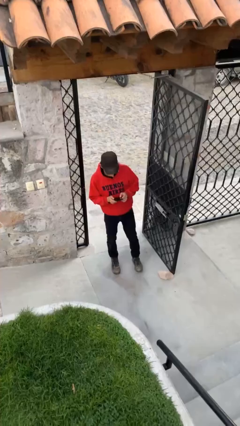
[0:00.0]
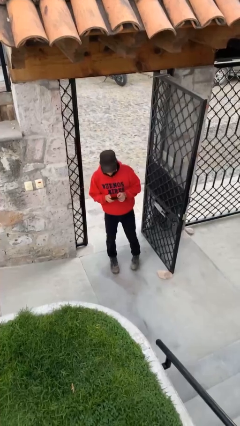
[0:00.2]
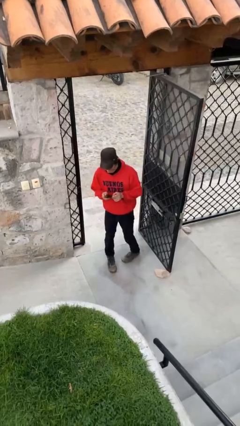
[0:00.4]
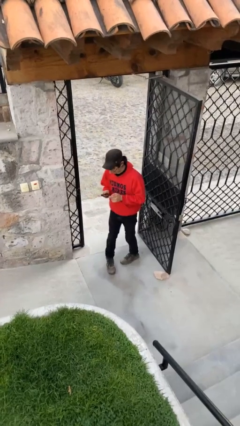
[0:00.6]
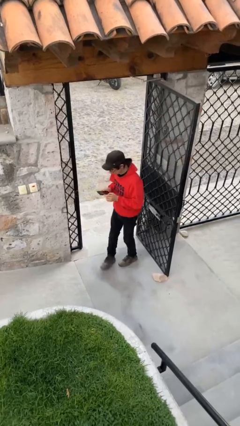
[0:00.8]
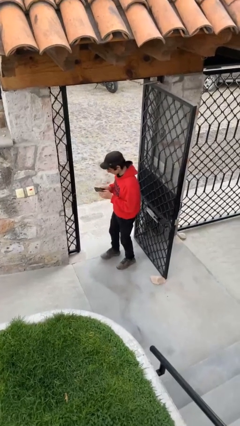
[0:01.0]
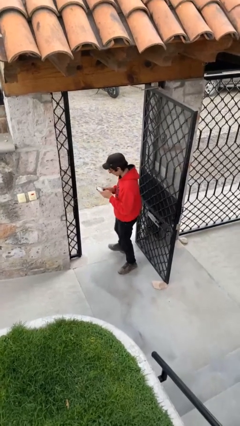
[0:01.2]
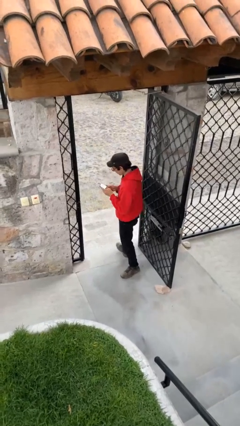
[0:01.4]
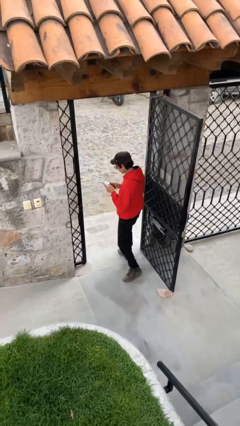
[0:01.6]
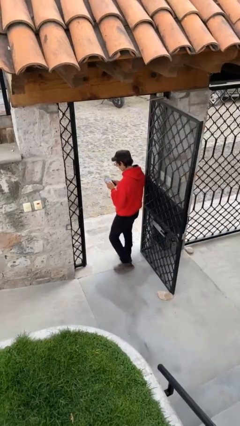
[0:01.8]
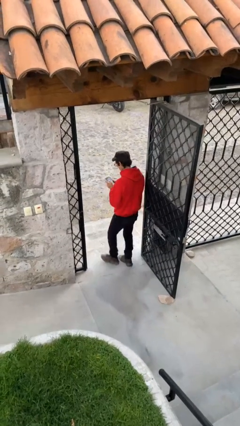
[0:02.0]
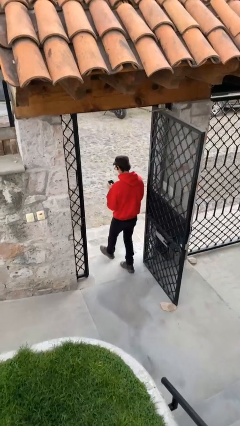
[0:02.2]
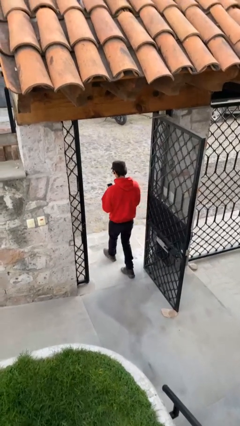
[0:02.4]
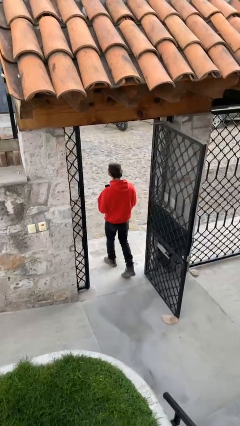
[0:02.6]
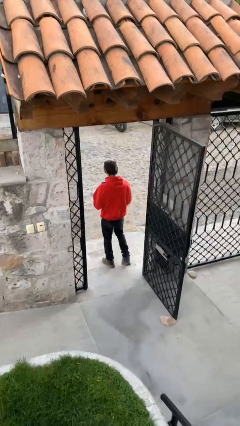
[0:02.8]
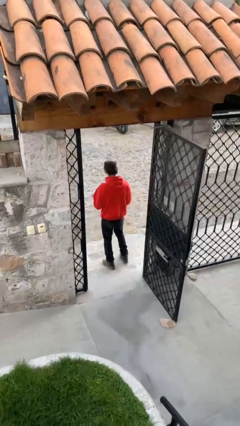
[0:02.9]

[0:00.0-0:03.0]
person exits scene through structure

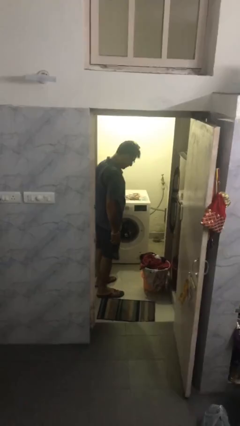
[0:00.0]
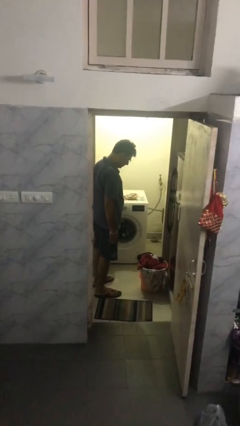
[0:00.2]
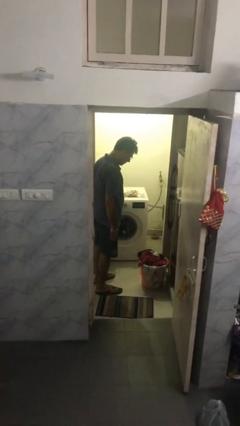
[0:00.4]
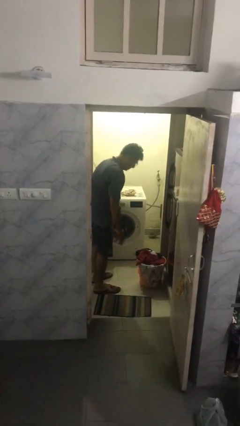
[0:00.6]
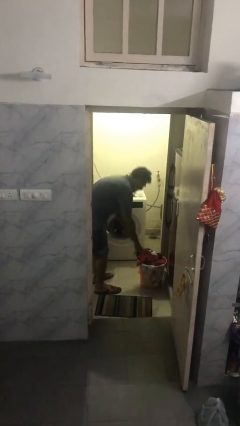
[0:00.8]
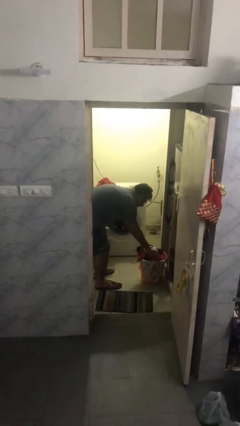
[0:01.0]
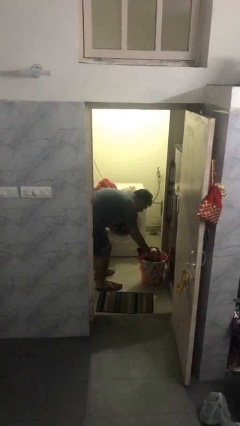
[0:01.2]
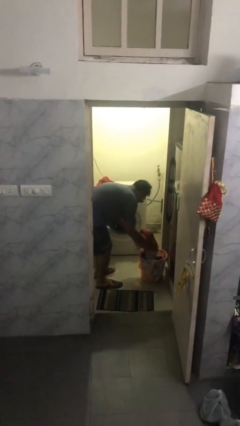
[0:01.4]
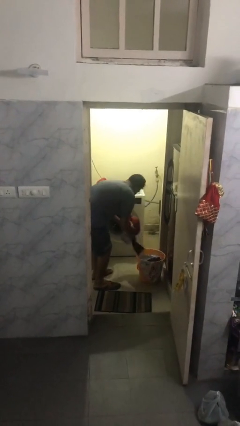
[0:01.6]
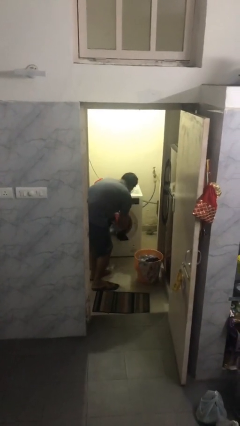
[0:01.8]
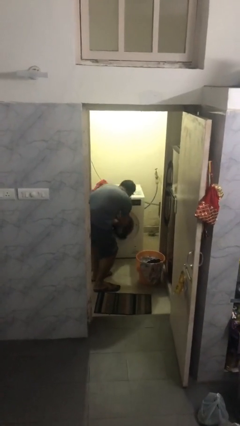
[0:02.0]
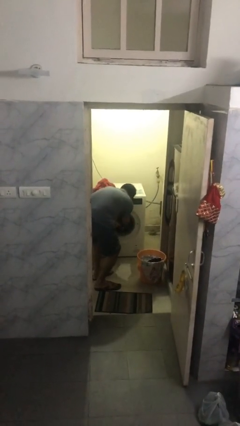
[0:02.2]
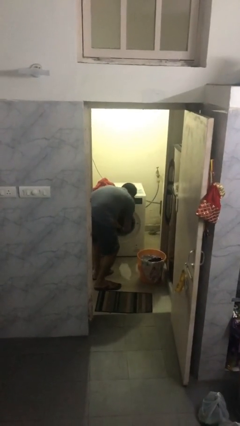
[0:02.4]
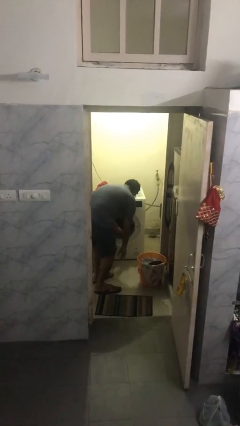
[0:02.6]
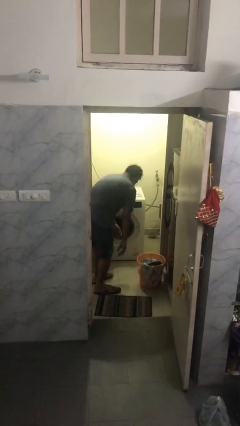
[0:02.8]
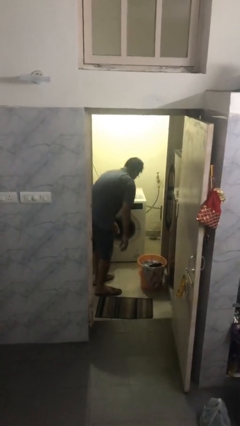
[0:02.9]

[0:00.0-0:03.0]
person loads clotheswasher

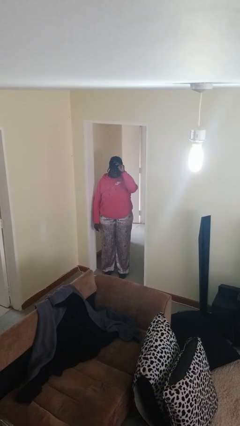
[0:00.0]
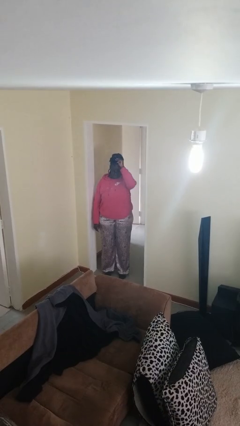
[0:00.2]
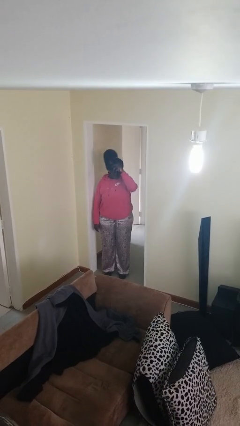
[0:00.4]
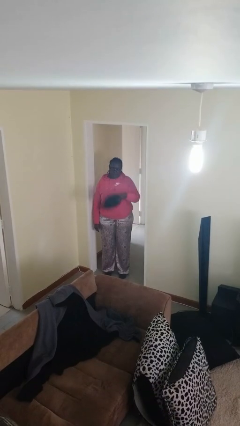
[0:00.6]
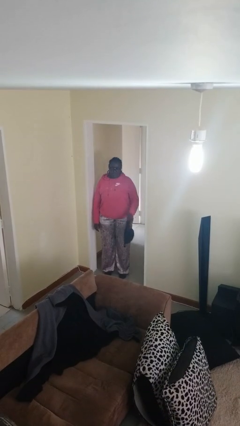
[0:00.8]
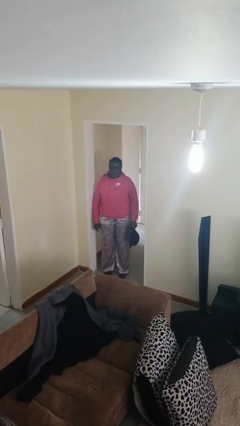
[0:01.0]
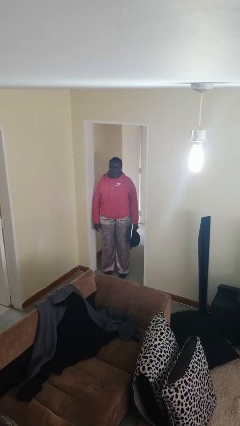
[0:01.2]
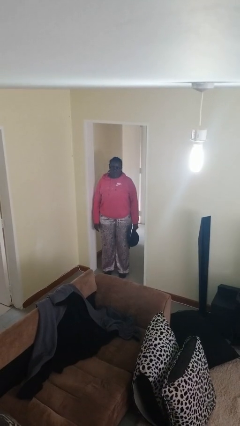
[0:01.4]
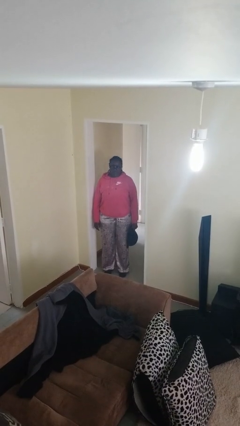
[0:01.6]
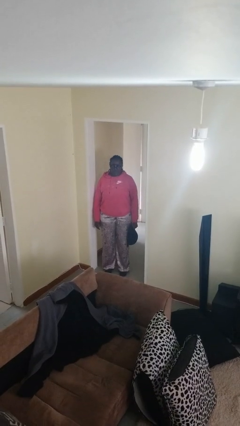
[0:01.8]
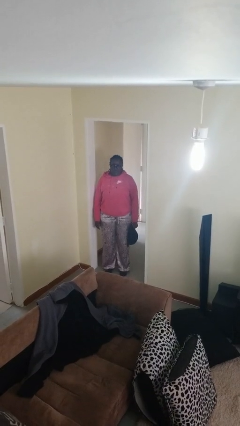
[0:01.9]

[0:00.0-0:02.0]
person takes off hat

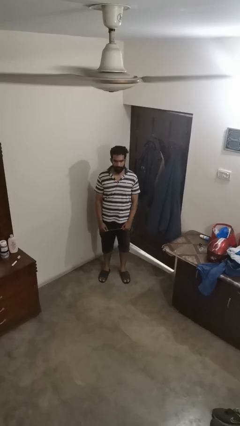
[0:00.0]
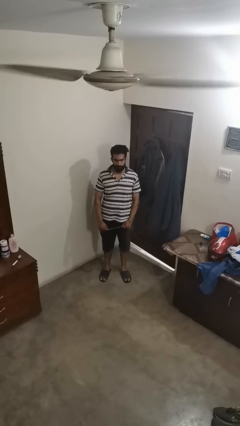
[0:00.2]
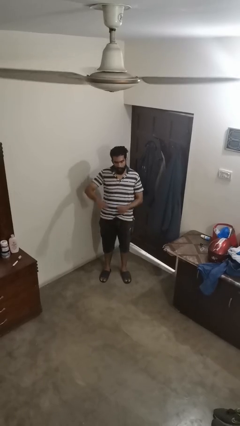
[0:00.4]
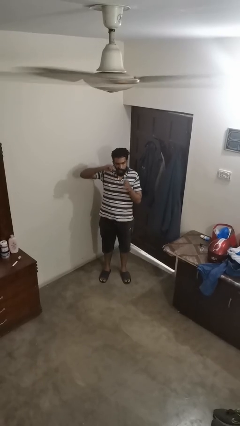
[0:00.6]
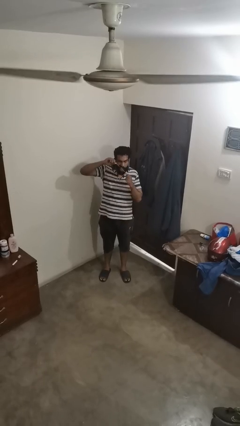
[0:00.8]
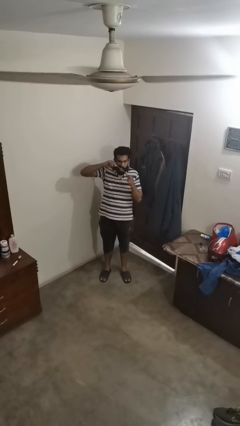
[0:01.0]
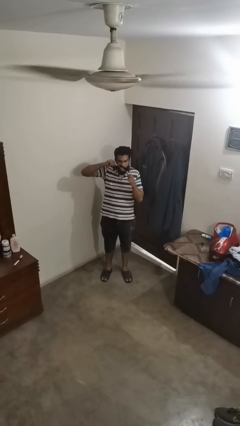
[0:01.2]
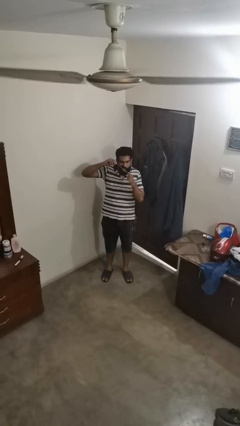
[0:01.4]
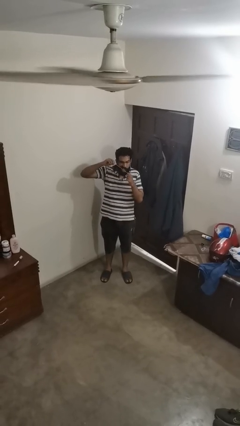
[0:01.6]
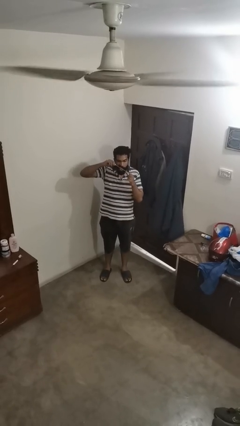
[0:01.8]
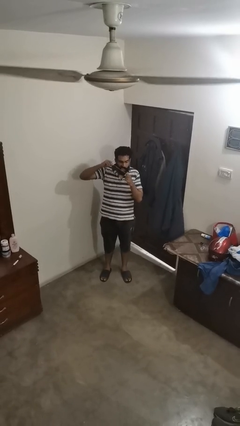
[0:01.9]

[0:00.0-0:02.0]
person flosses

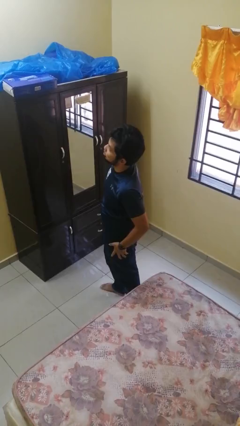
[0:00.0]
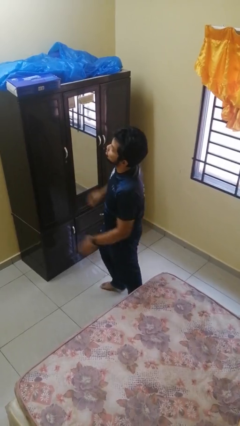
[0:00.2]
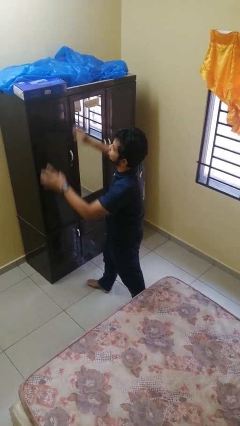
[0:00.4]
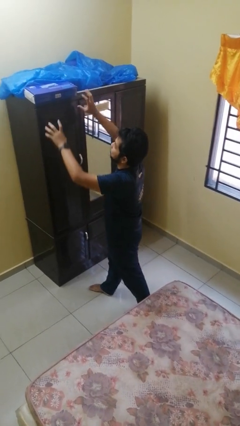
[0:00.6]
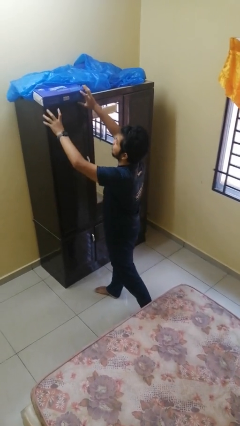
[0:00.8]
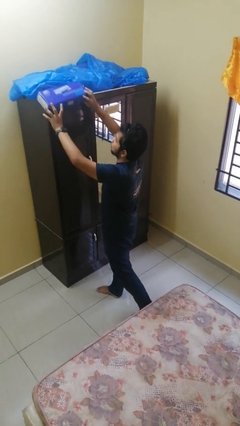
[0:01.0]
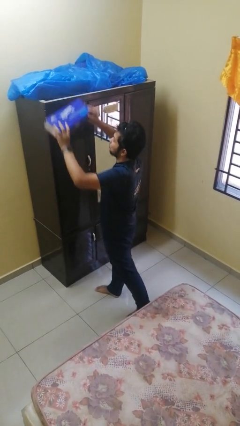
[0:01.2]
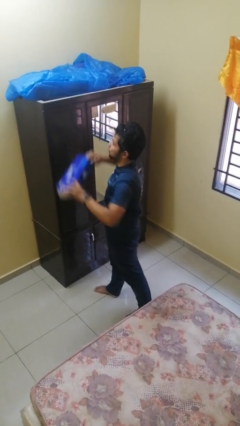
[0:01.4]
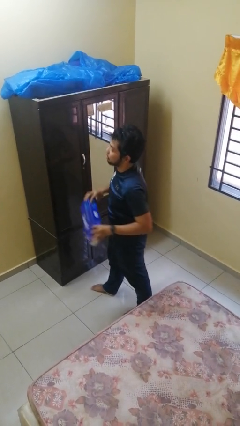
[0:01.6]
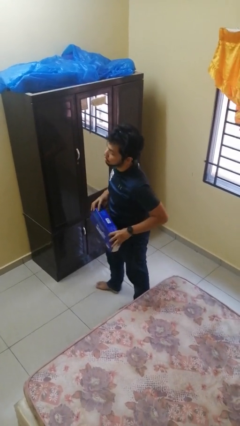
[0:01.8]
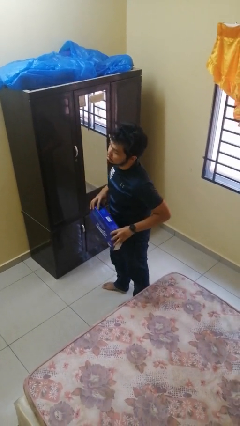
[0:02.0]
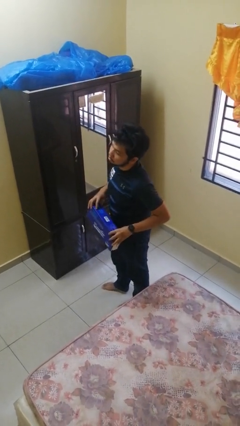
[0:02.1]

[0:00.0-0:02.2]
person picks up object from countertop

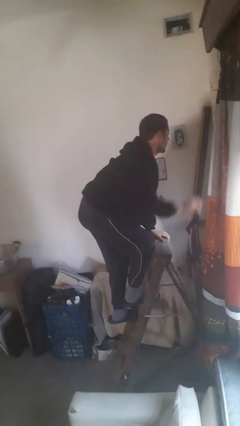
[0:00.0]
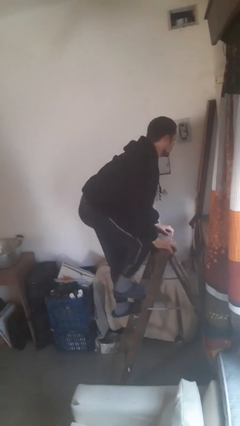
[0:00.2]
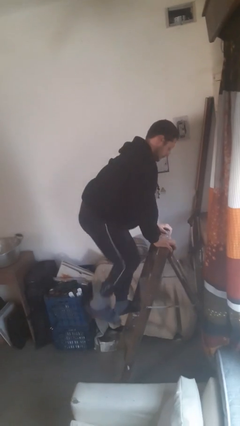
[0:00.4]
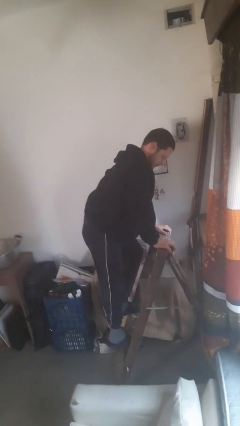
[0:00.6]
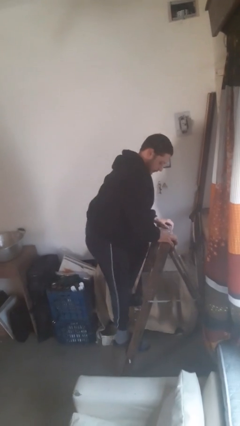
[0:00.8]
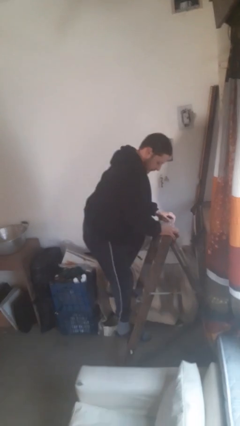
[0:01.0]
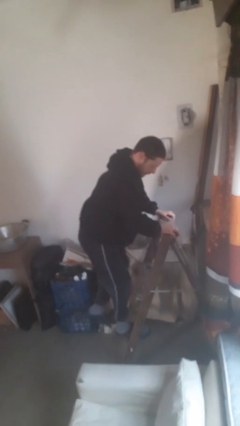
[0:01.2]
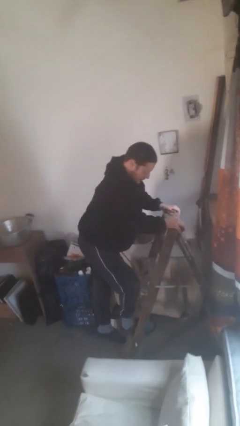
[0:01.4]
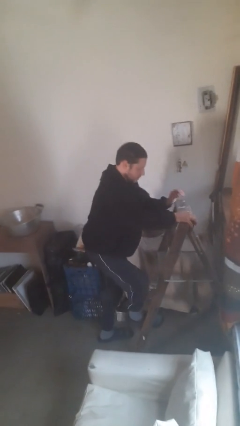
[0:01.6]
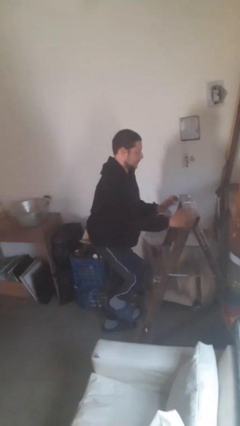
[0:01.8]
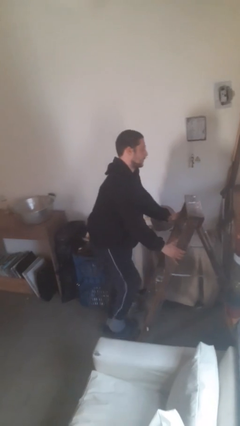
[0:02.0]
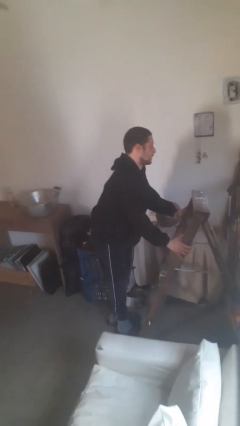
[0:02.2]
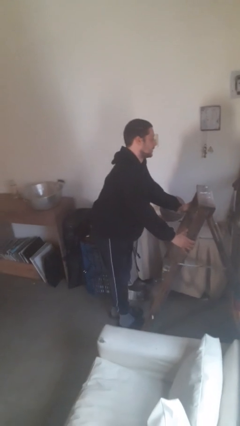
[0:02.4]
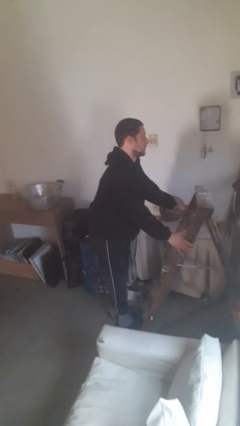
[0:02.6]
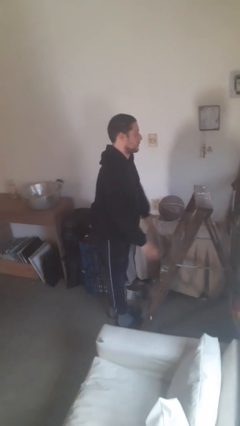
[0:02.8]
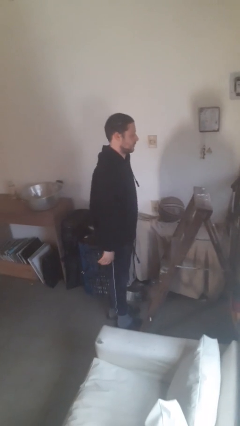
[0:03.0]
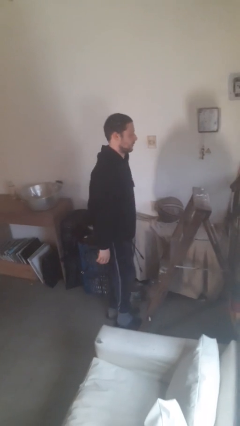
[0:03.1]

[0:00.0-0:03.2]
person climbs down ladder

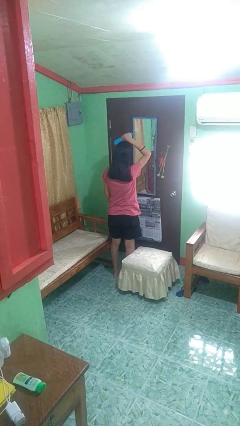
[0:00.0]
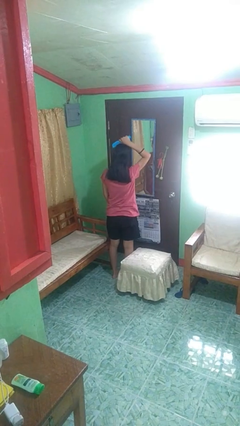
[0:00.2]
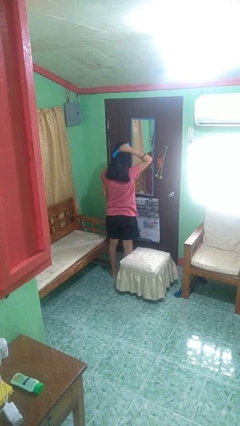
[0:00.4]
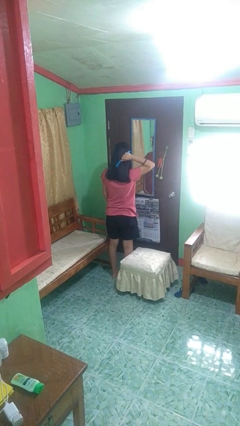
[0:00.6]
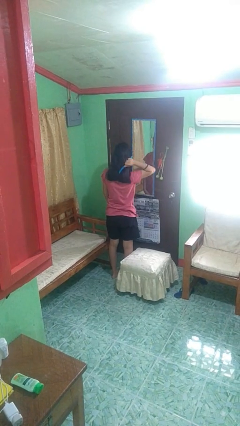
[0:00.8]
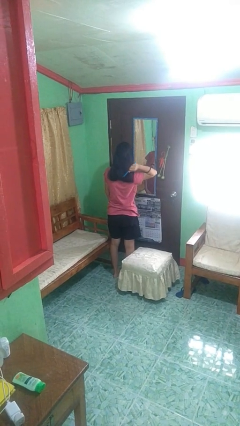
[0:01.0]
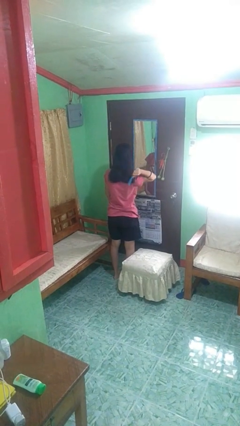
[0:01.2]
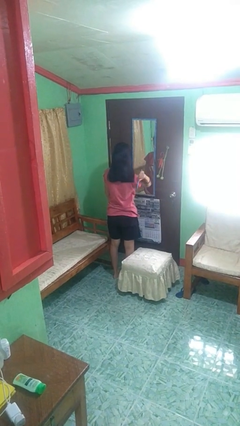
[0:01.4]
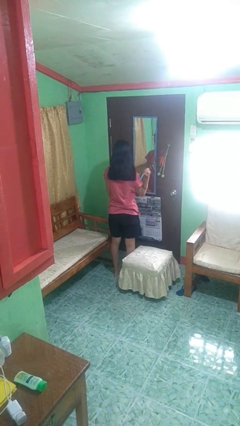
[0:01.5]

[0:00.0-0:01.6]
person brushes hair
